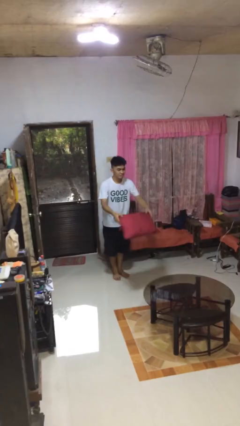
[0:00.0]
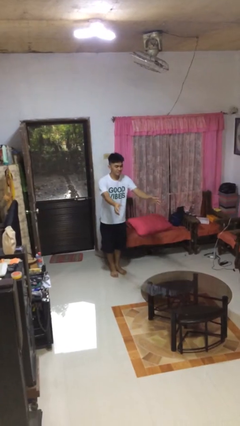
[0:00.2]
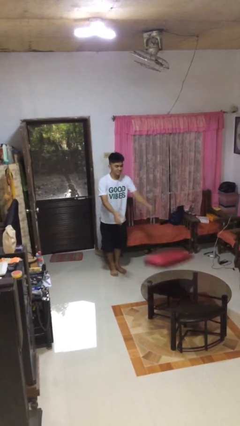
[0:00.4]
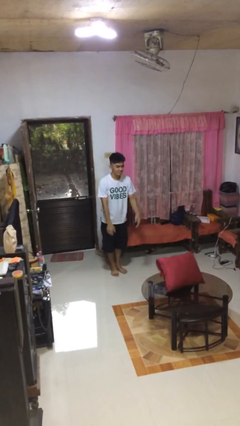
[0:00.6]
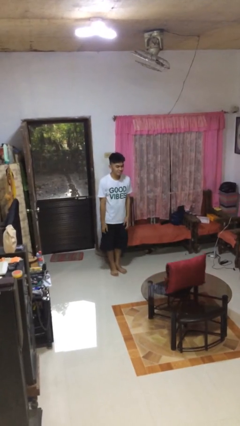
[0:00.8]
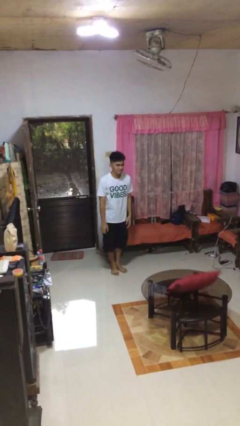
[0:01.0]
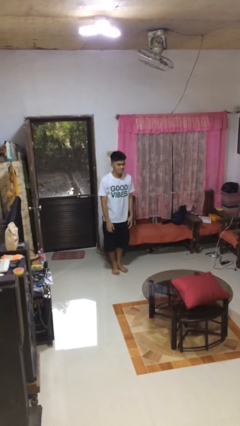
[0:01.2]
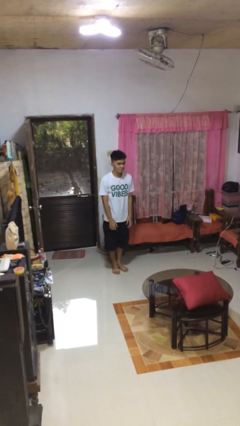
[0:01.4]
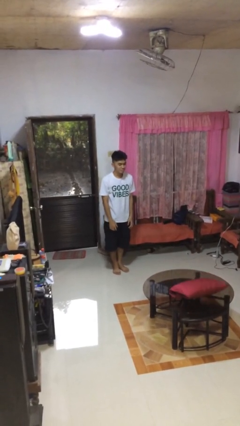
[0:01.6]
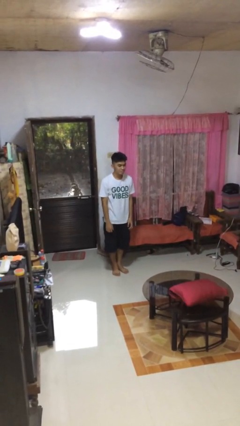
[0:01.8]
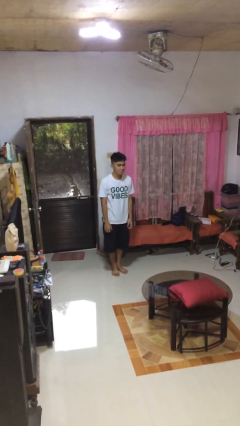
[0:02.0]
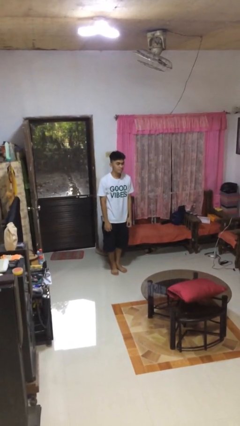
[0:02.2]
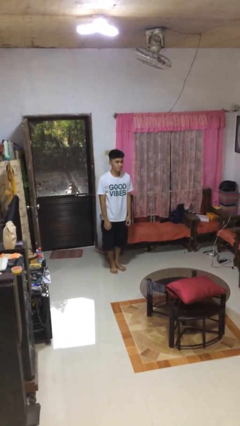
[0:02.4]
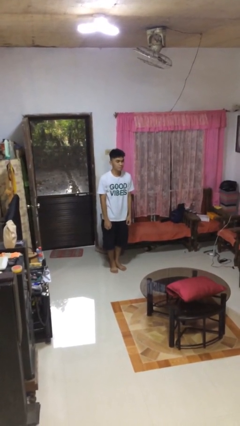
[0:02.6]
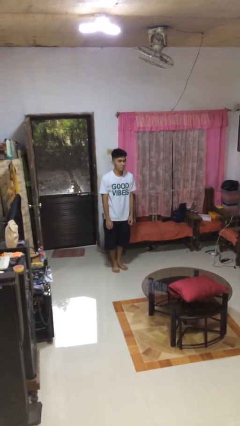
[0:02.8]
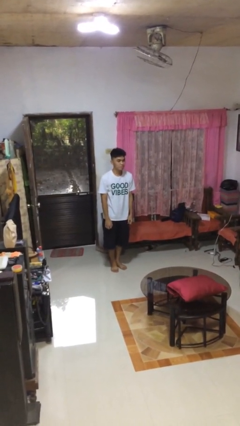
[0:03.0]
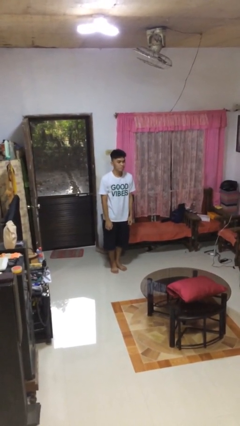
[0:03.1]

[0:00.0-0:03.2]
person throws object on table

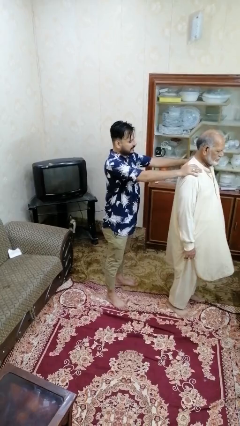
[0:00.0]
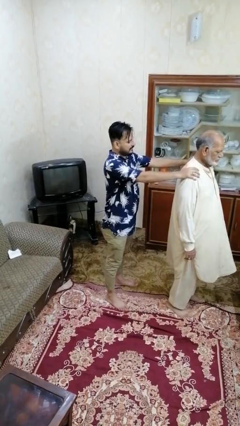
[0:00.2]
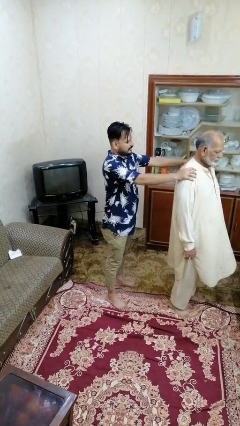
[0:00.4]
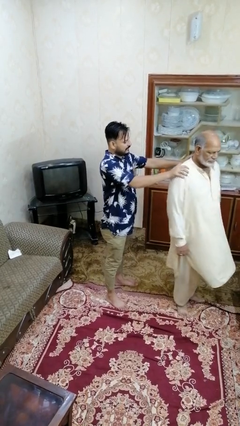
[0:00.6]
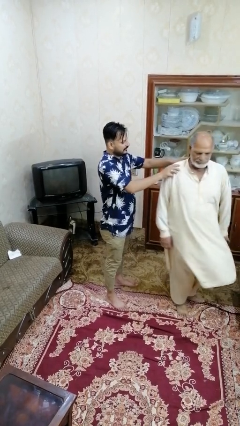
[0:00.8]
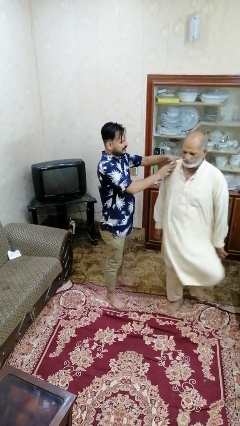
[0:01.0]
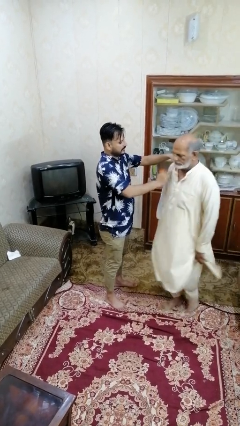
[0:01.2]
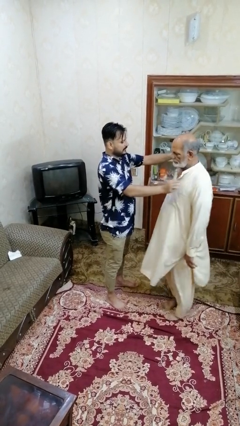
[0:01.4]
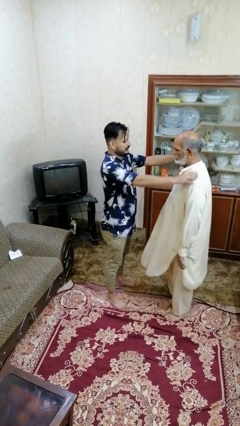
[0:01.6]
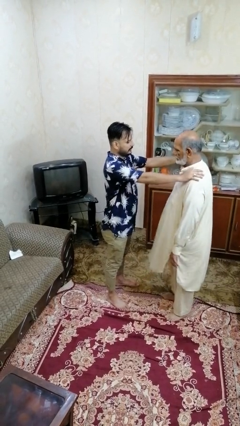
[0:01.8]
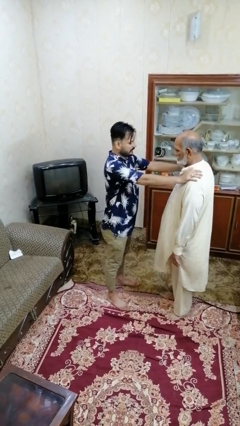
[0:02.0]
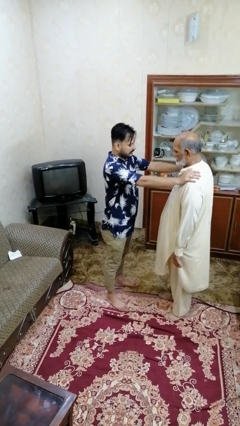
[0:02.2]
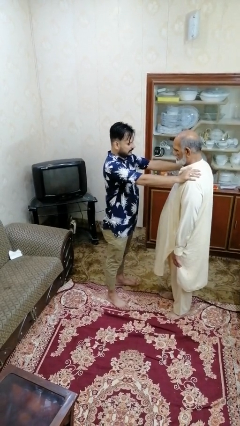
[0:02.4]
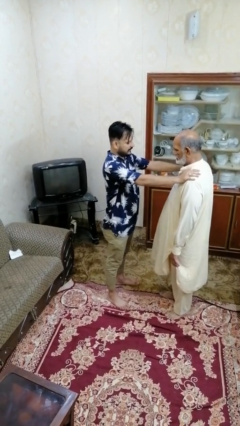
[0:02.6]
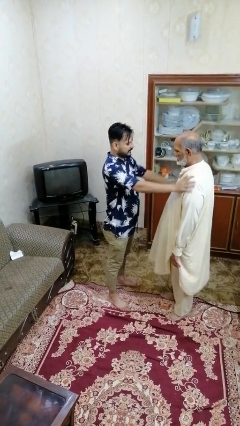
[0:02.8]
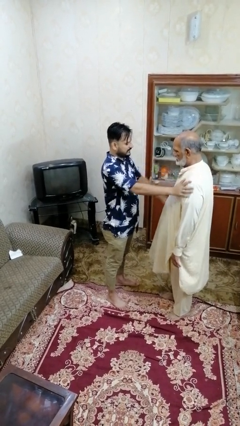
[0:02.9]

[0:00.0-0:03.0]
person spins person around

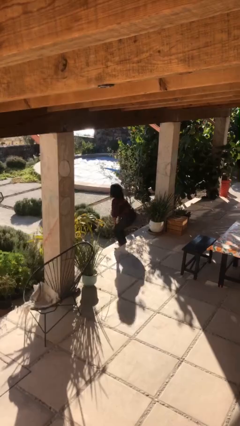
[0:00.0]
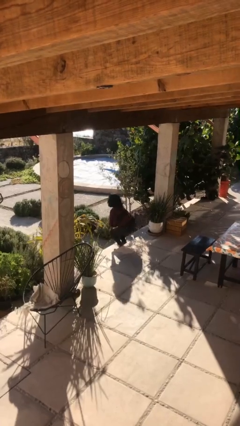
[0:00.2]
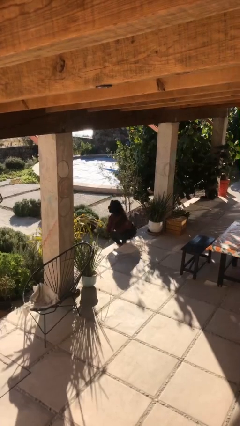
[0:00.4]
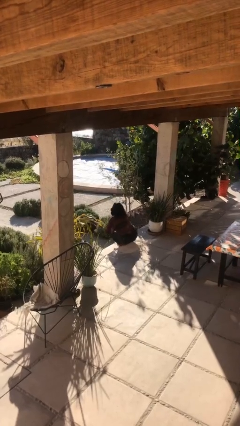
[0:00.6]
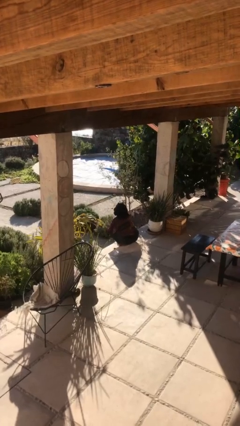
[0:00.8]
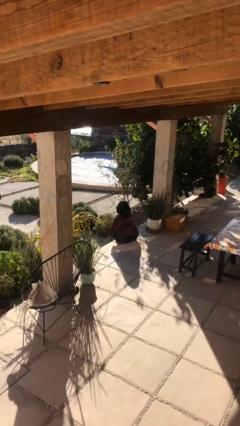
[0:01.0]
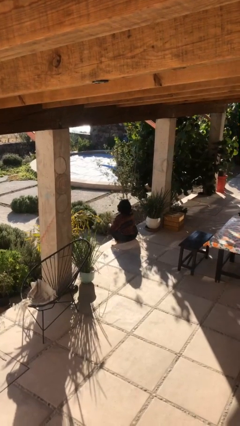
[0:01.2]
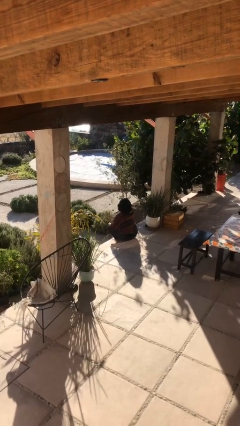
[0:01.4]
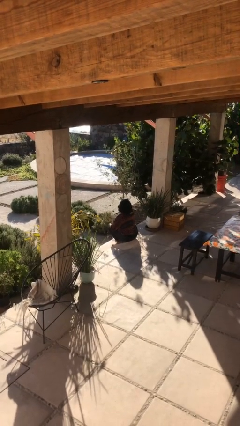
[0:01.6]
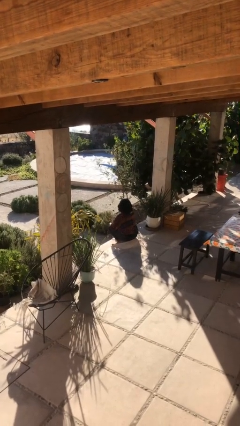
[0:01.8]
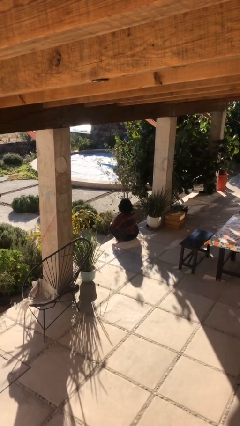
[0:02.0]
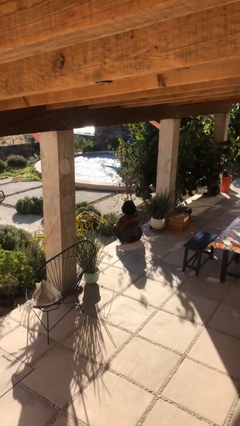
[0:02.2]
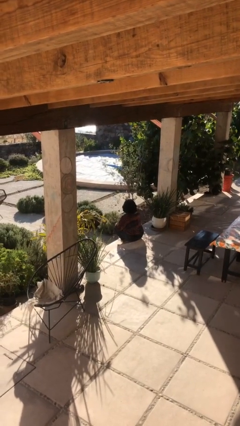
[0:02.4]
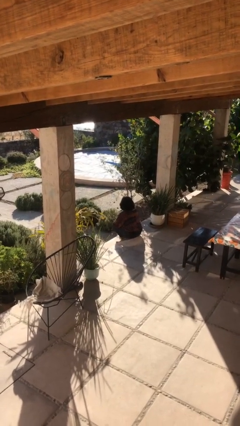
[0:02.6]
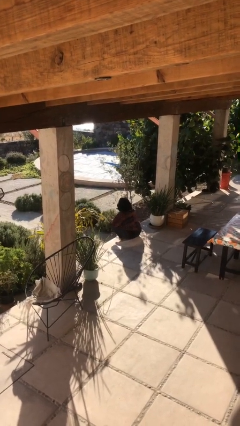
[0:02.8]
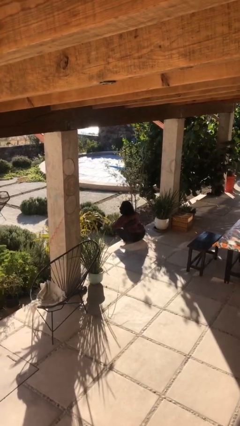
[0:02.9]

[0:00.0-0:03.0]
person sits down

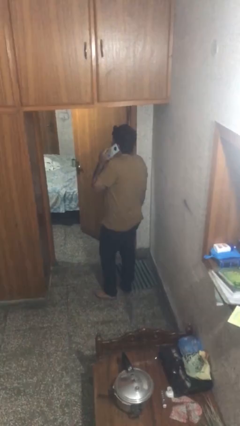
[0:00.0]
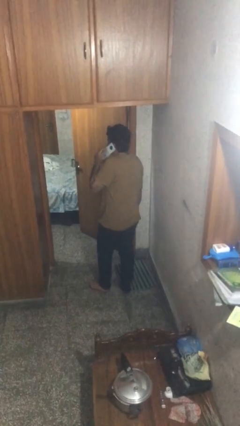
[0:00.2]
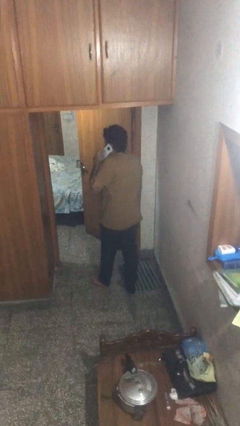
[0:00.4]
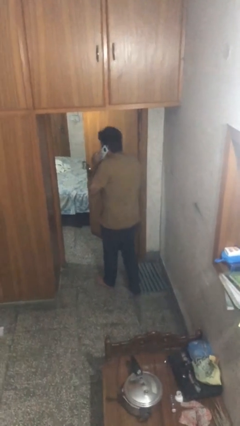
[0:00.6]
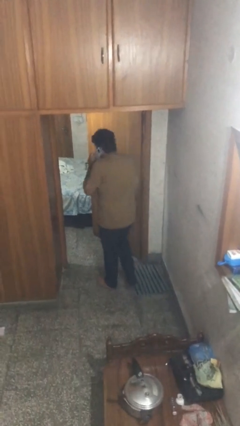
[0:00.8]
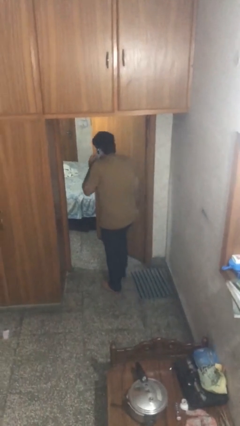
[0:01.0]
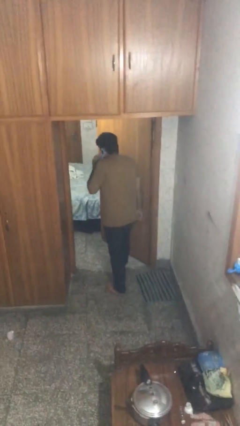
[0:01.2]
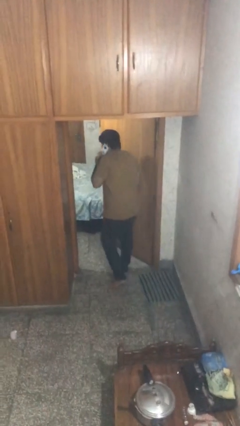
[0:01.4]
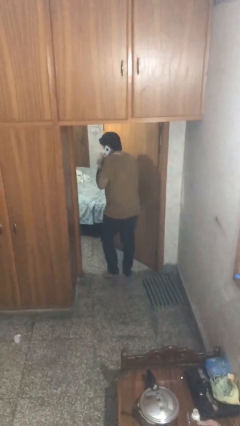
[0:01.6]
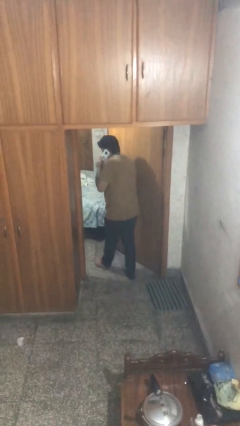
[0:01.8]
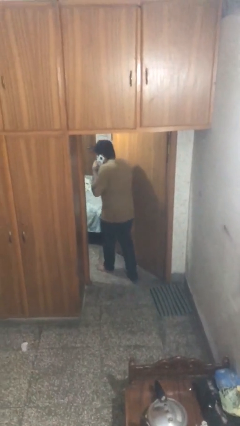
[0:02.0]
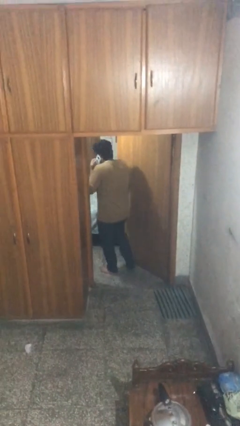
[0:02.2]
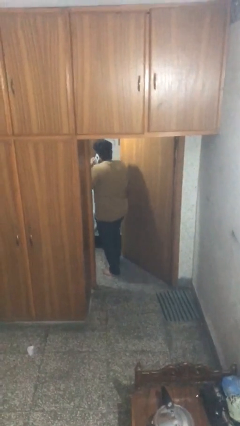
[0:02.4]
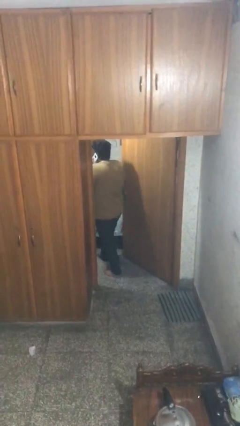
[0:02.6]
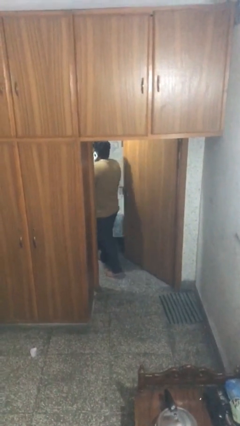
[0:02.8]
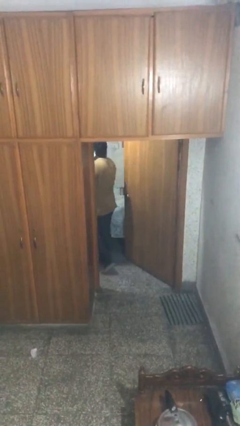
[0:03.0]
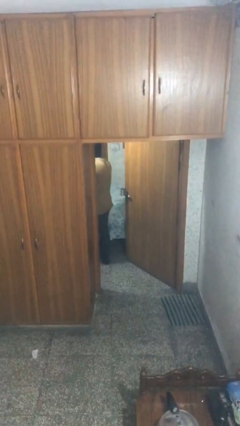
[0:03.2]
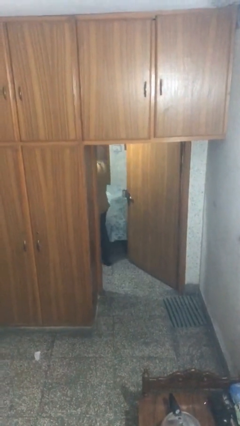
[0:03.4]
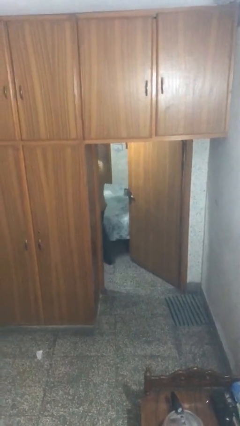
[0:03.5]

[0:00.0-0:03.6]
person exits scene through structure

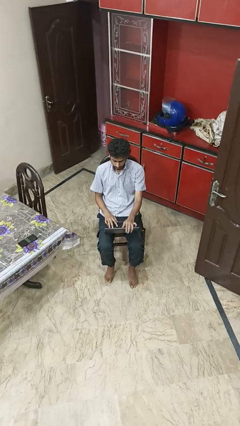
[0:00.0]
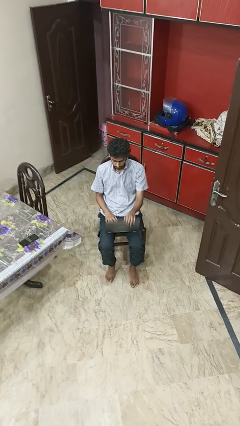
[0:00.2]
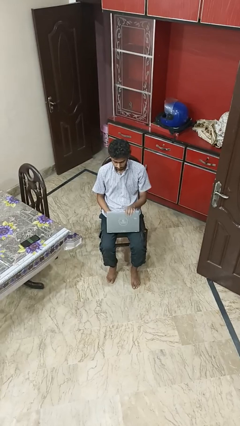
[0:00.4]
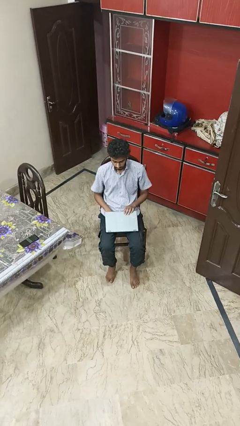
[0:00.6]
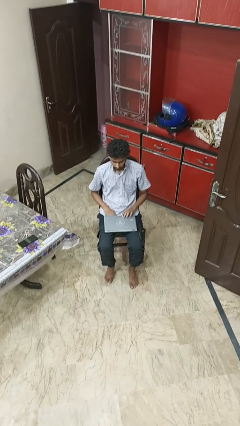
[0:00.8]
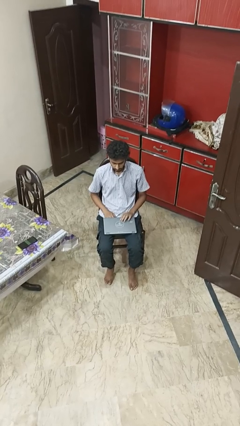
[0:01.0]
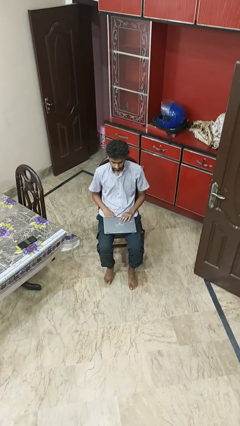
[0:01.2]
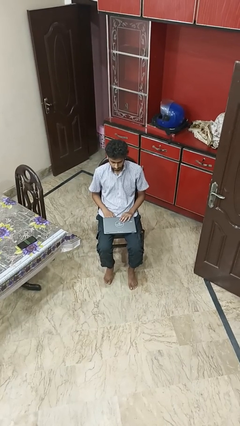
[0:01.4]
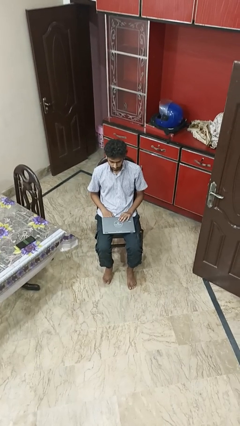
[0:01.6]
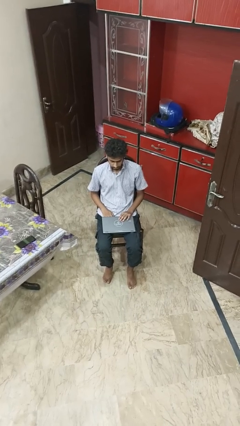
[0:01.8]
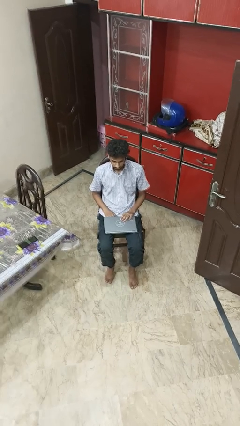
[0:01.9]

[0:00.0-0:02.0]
person closes laptop

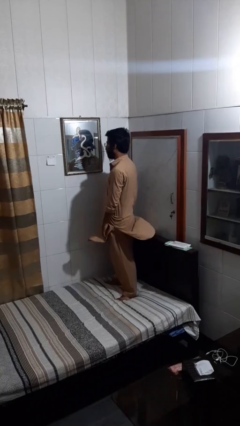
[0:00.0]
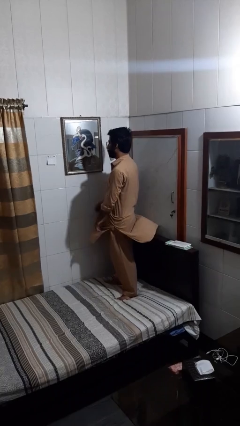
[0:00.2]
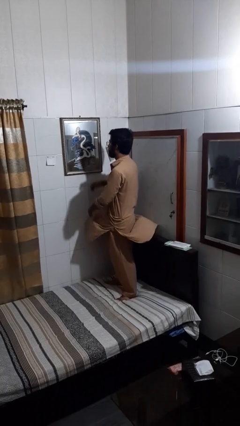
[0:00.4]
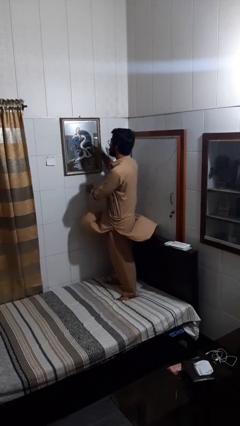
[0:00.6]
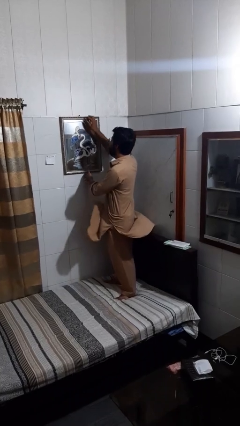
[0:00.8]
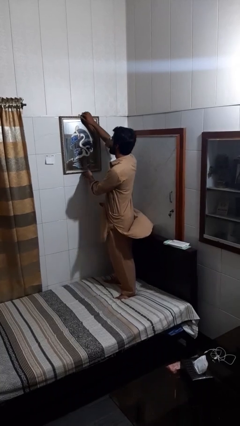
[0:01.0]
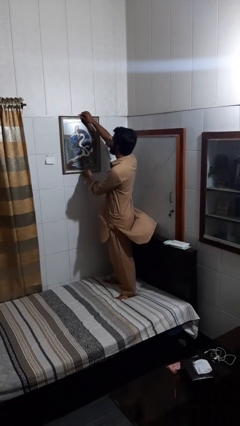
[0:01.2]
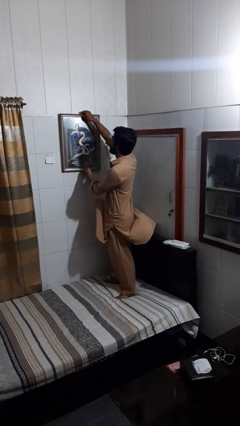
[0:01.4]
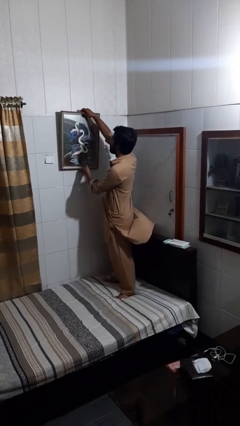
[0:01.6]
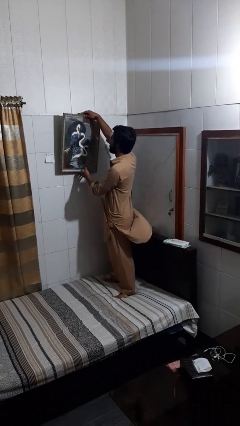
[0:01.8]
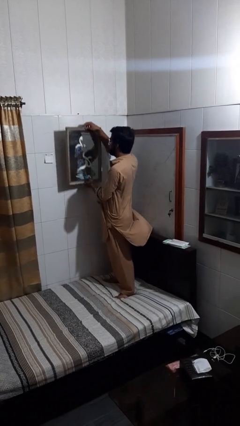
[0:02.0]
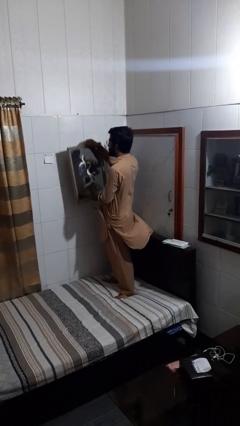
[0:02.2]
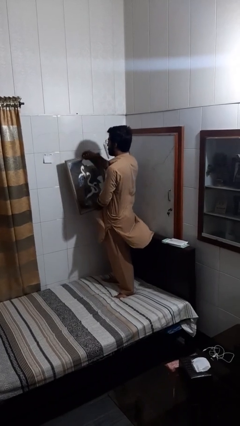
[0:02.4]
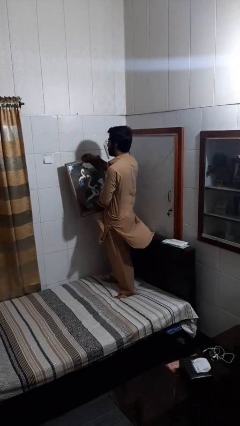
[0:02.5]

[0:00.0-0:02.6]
person takes down picture frame

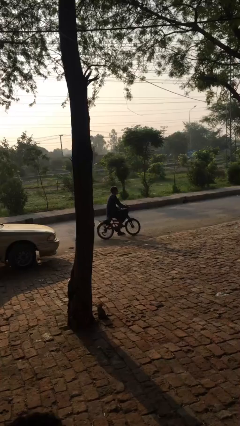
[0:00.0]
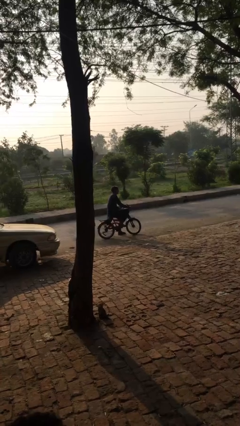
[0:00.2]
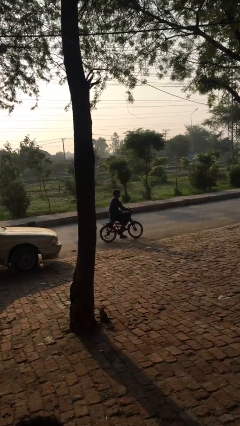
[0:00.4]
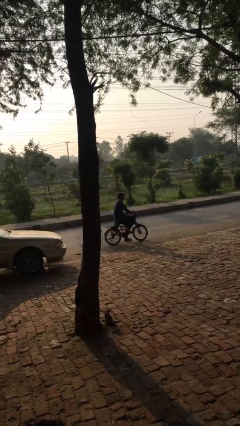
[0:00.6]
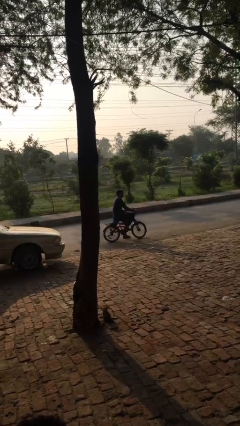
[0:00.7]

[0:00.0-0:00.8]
person rides bicycle
